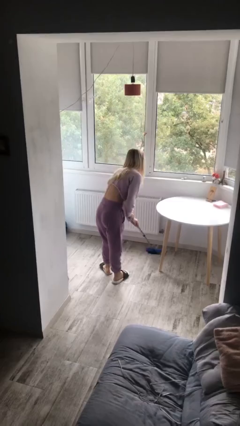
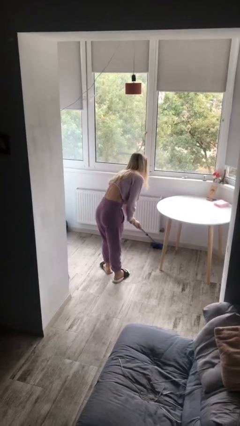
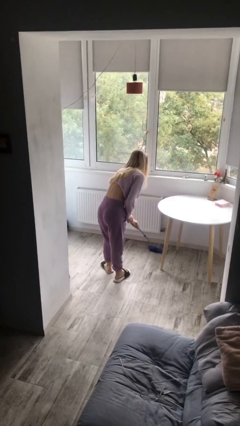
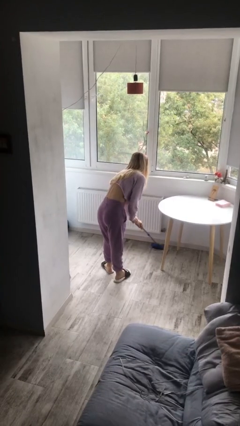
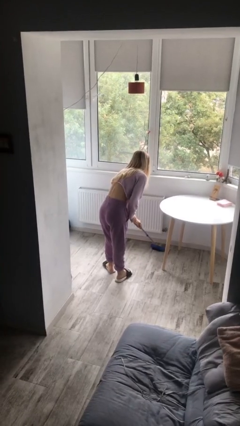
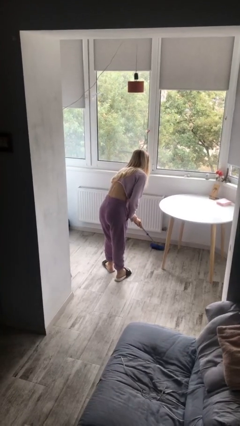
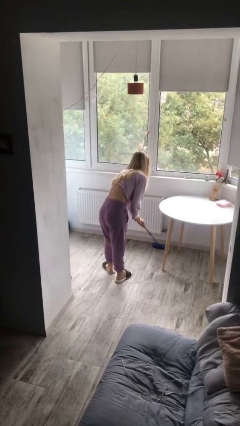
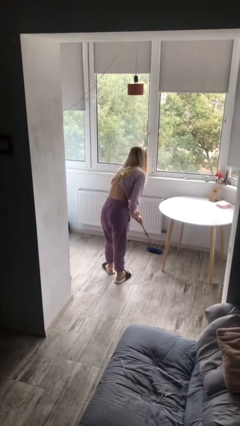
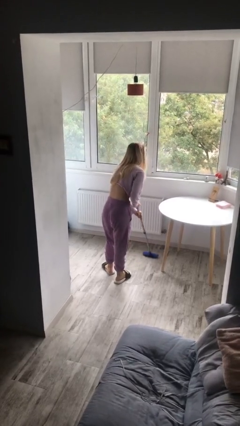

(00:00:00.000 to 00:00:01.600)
person mops

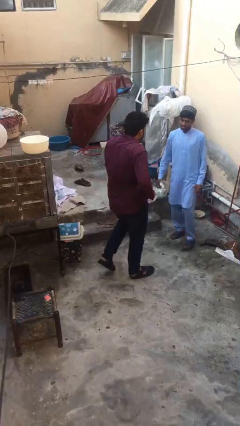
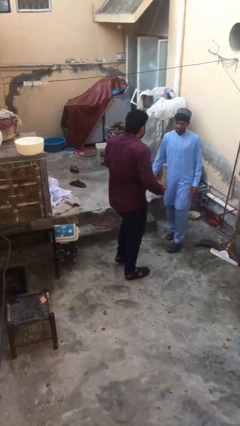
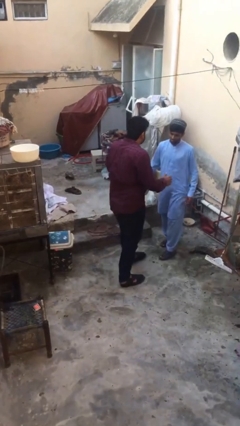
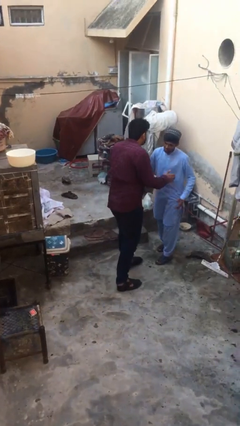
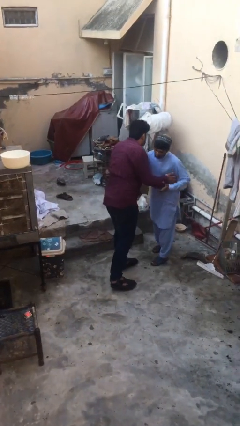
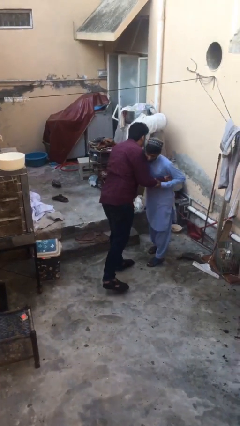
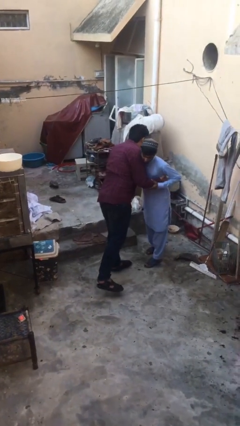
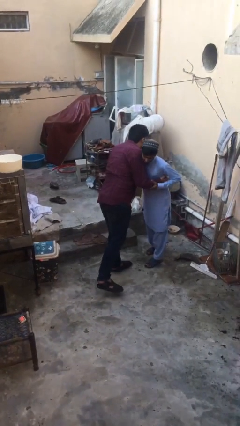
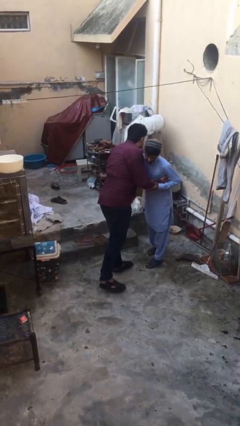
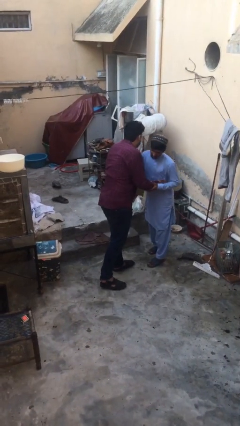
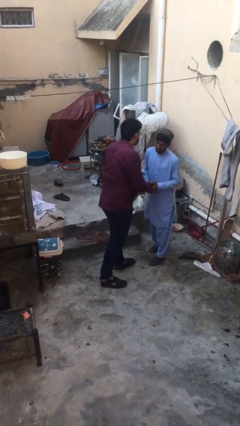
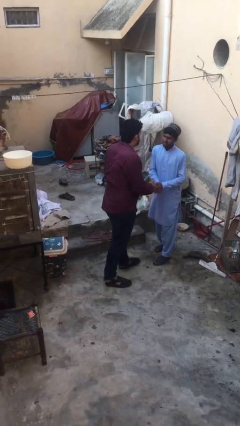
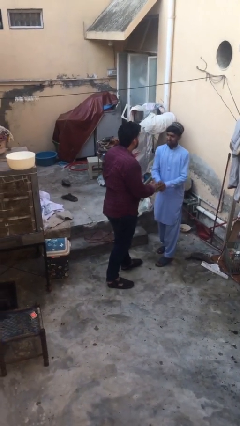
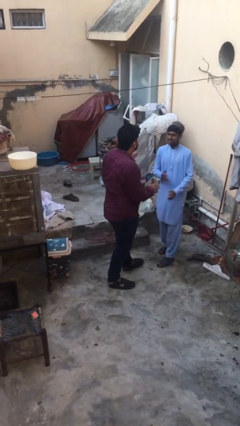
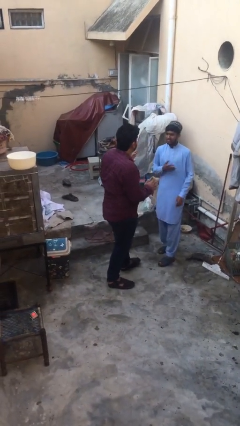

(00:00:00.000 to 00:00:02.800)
person embraces person

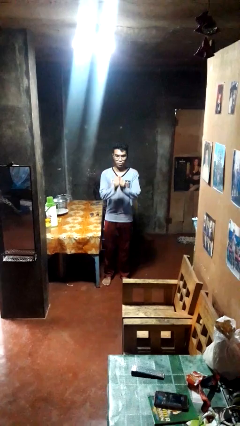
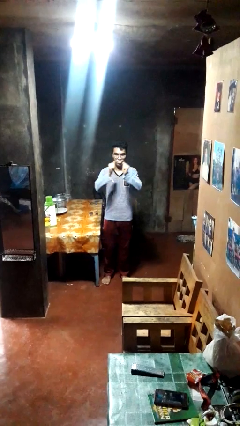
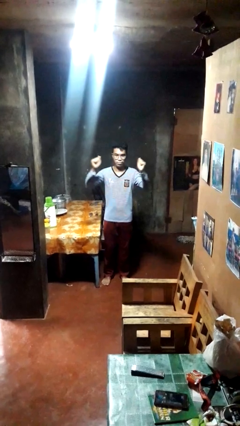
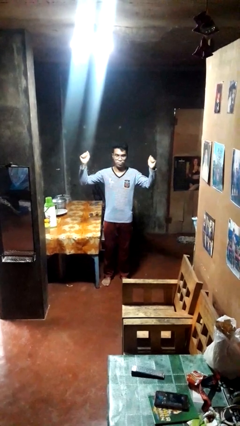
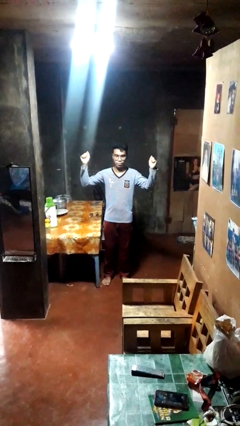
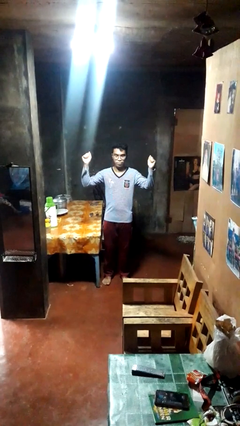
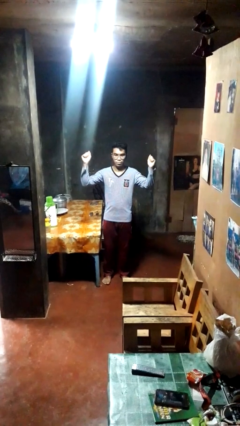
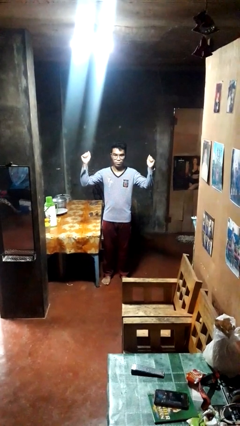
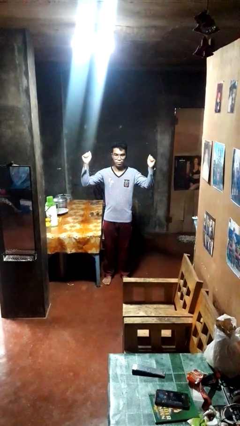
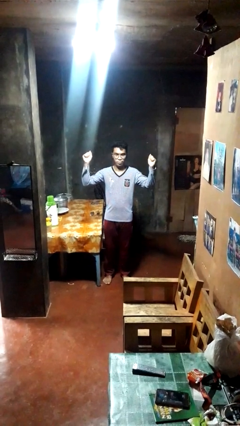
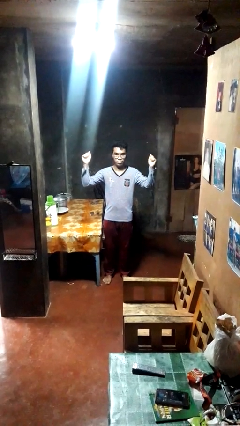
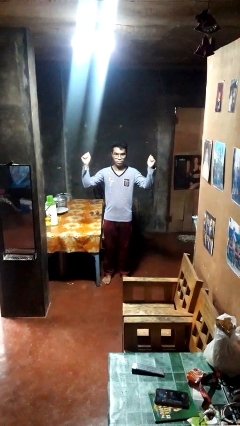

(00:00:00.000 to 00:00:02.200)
person gestures zoom in

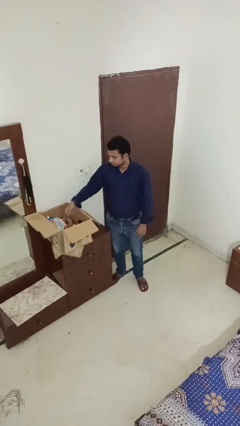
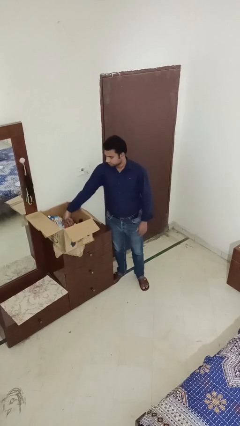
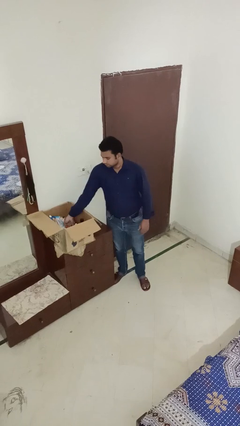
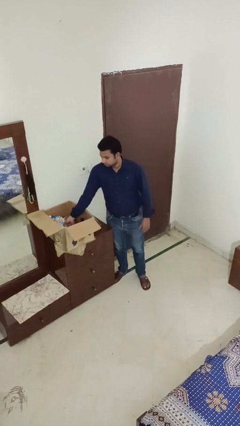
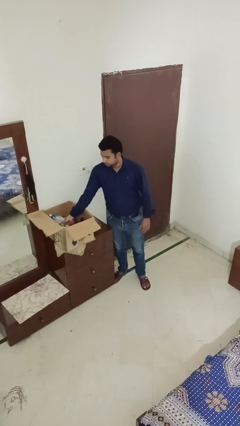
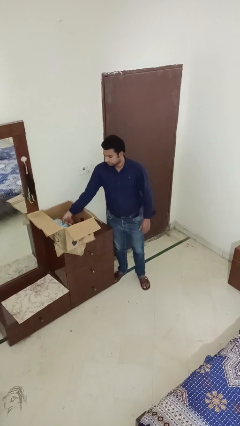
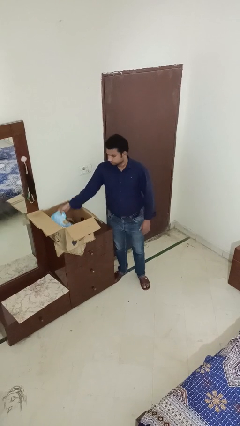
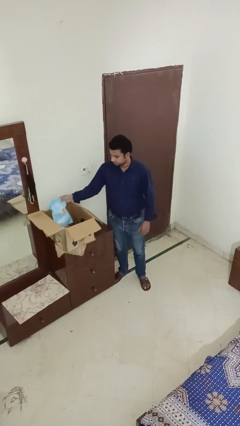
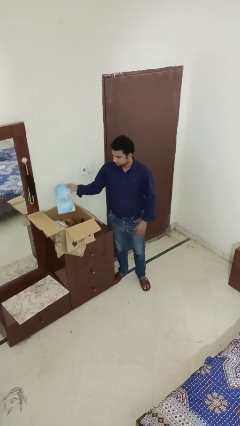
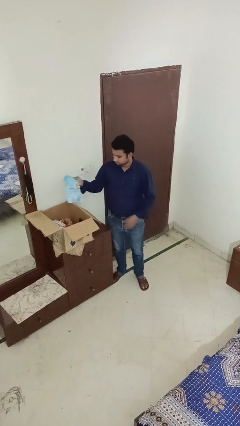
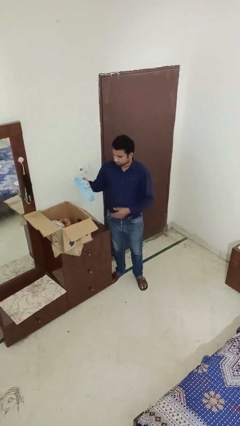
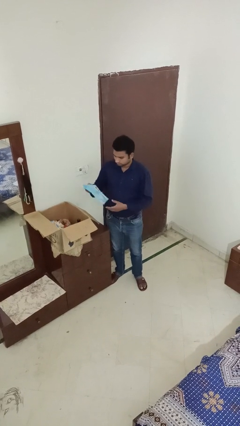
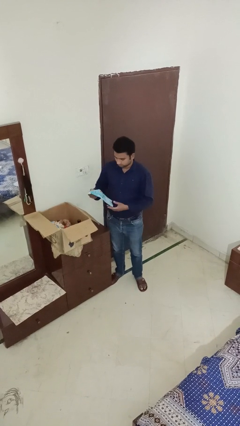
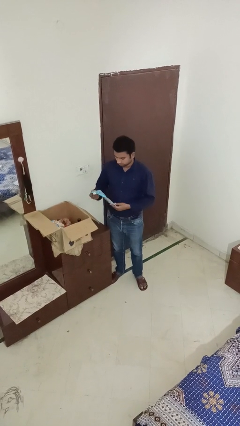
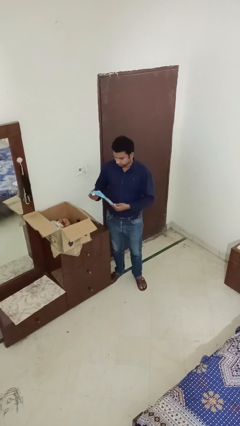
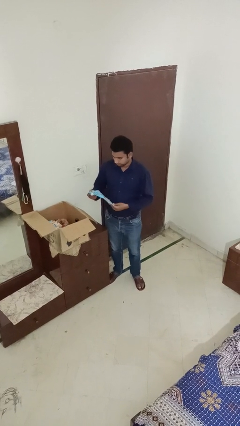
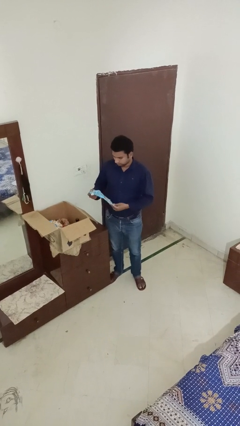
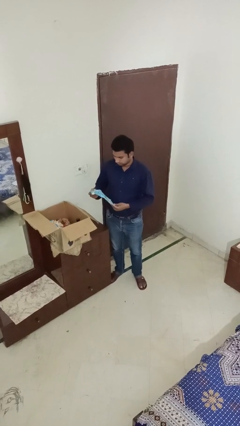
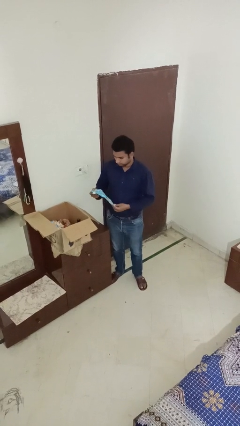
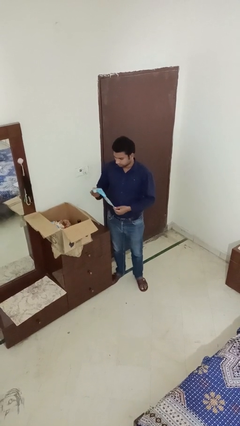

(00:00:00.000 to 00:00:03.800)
person takes object from box

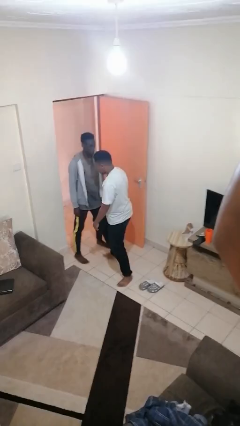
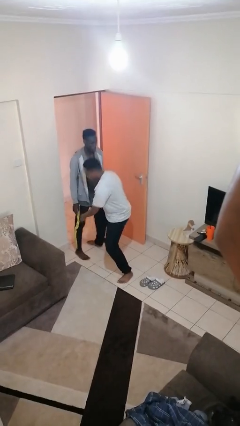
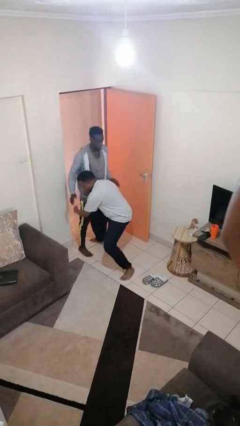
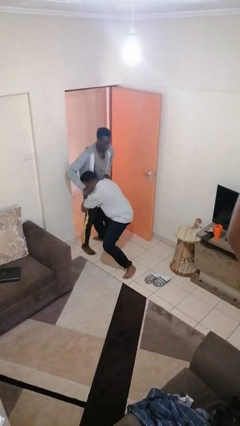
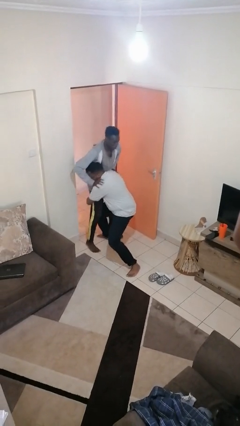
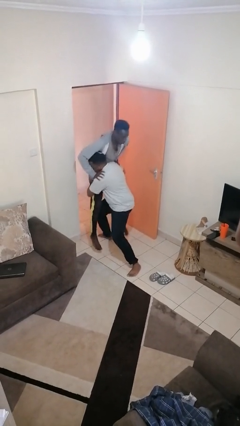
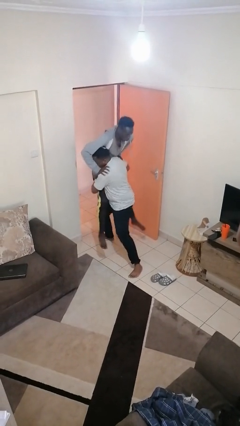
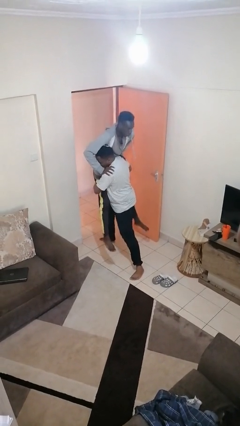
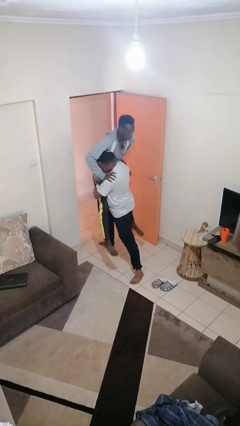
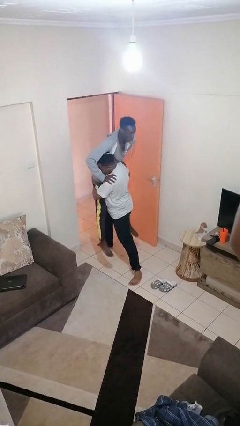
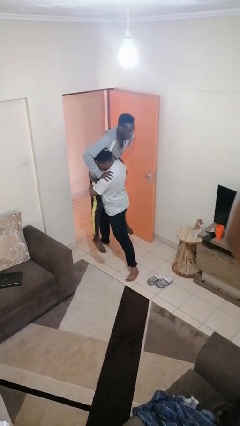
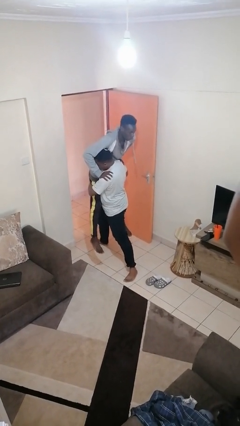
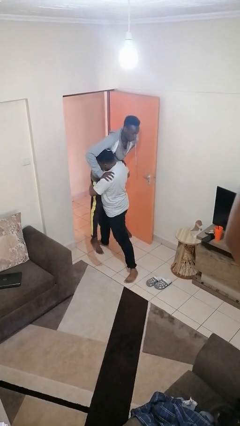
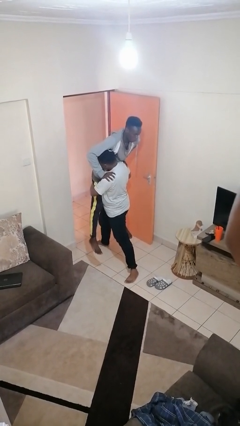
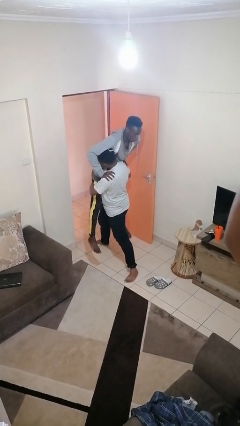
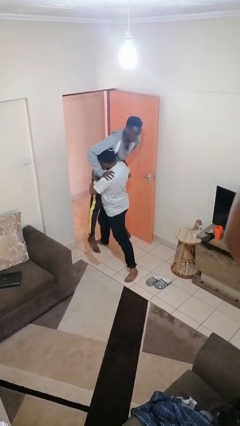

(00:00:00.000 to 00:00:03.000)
person picks up person

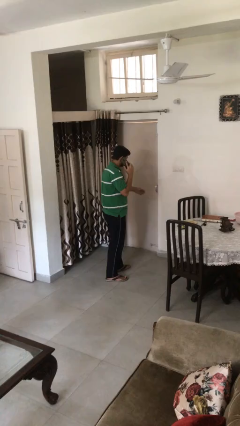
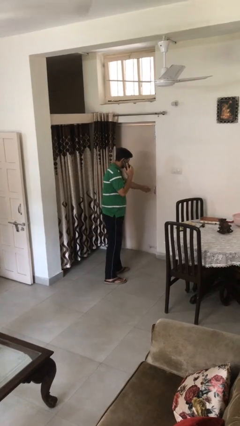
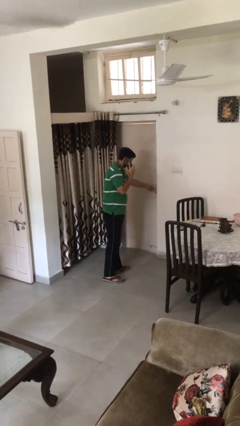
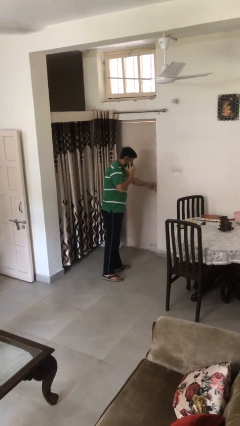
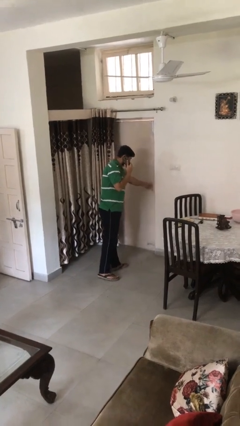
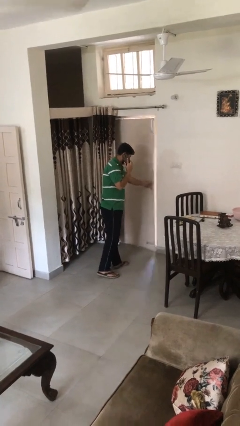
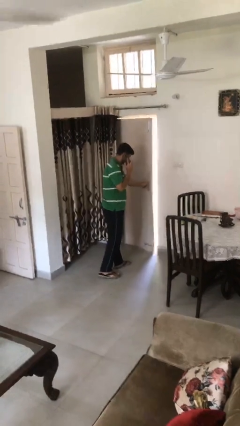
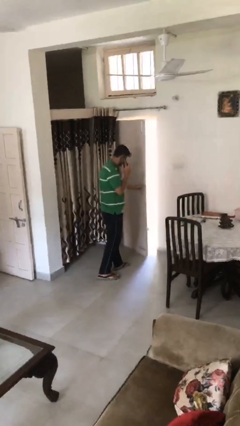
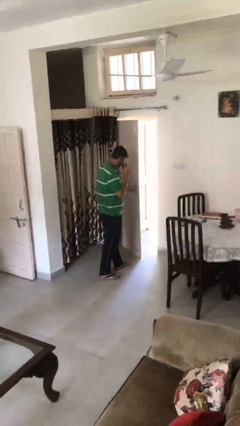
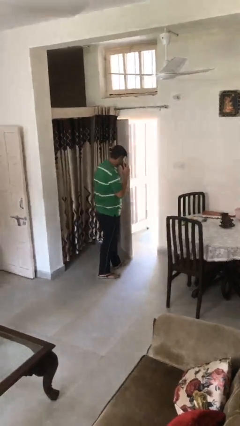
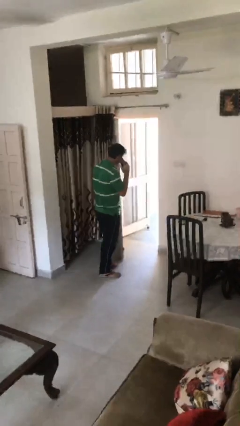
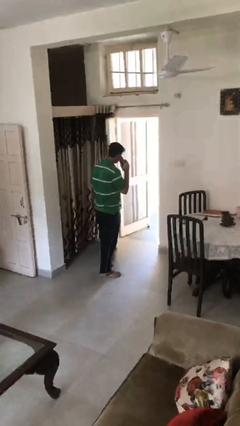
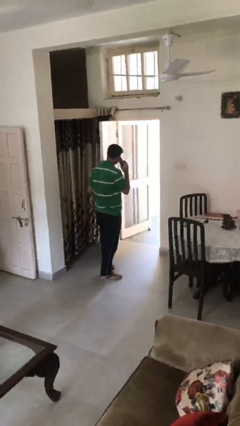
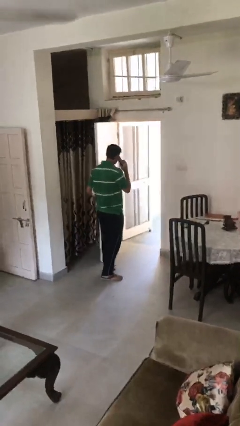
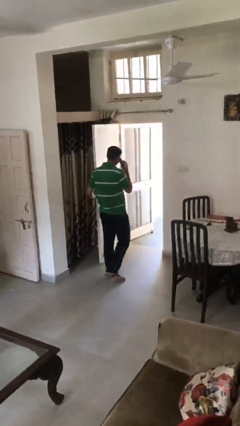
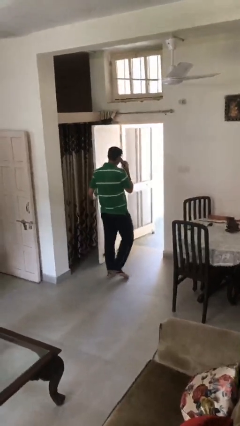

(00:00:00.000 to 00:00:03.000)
person opens facility door

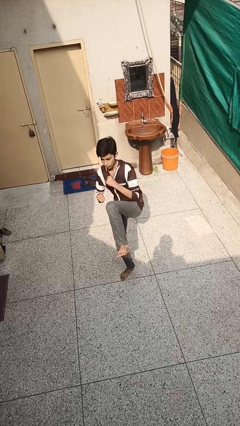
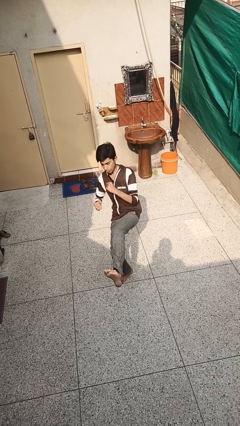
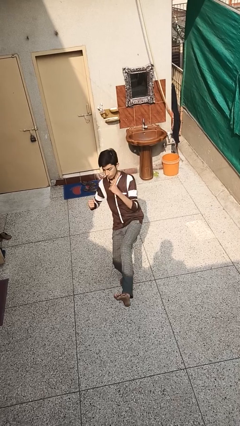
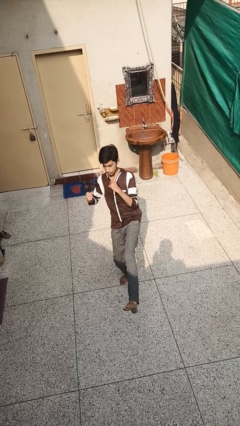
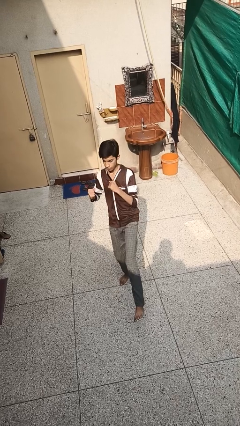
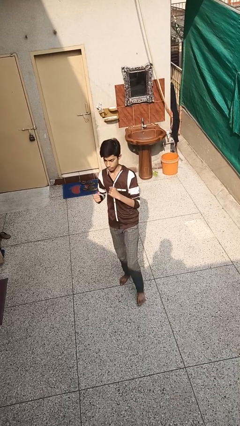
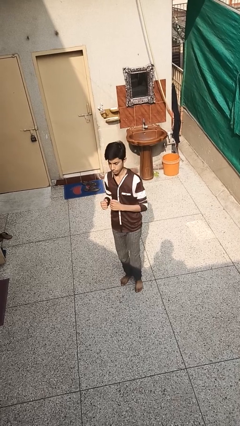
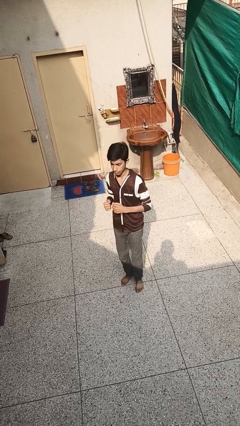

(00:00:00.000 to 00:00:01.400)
person karate kicks
